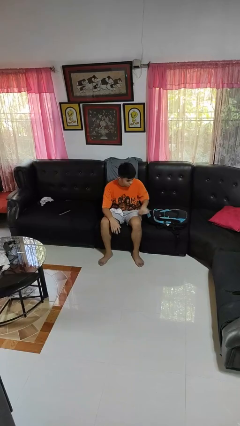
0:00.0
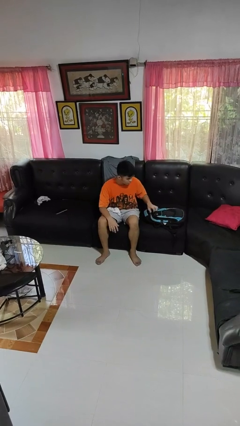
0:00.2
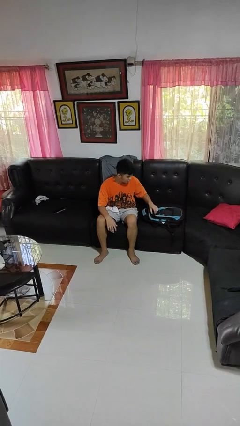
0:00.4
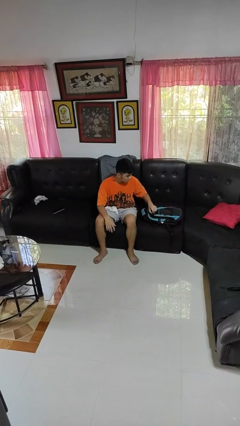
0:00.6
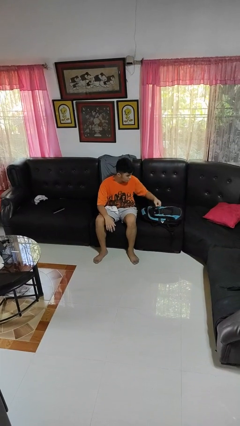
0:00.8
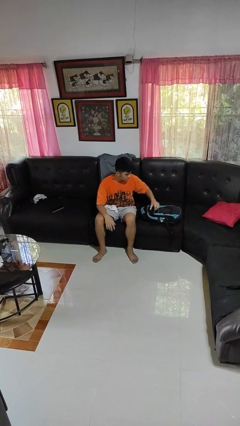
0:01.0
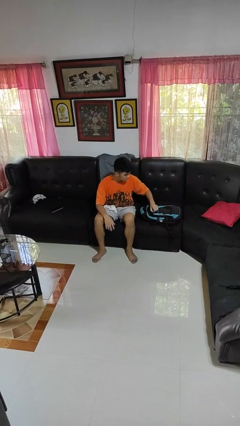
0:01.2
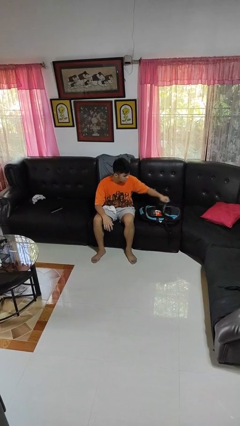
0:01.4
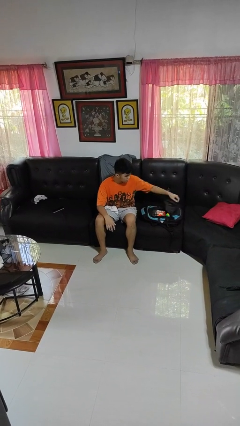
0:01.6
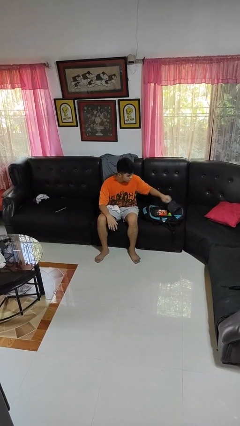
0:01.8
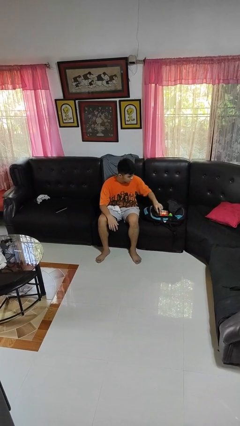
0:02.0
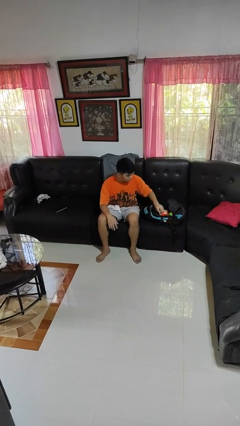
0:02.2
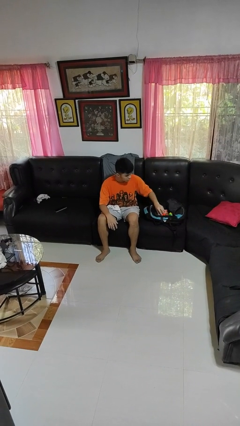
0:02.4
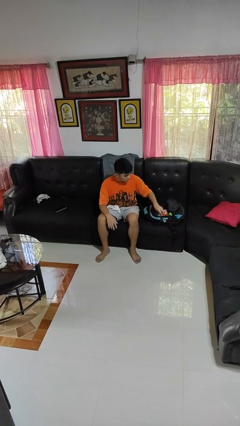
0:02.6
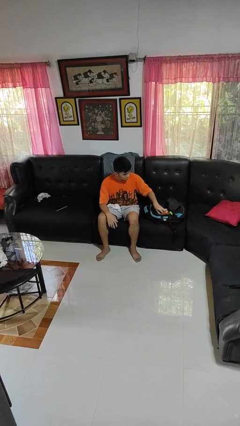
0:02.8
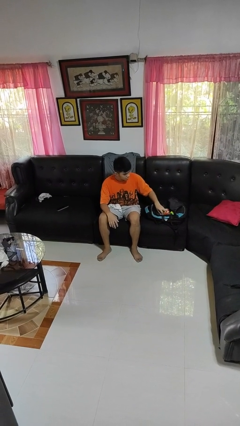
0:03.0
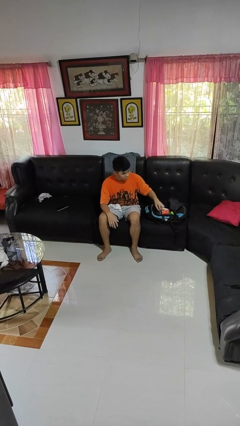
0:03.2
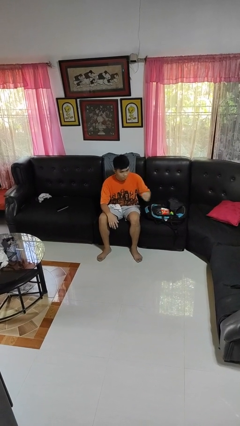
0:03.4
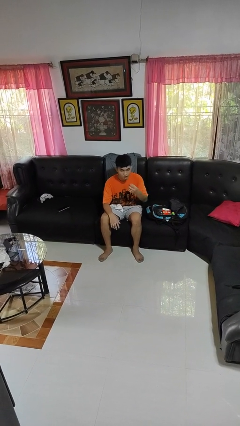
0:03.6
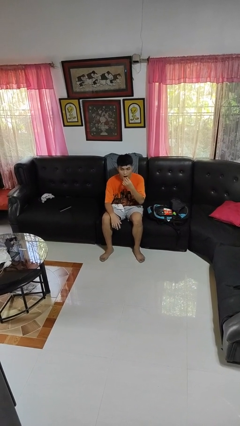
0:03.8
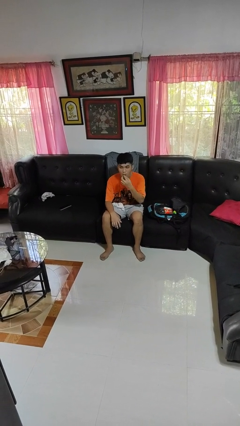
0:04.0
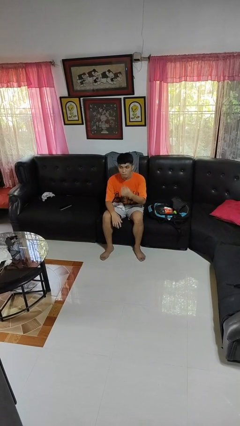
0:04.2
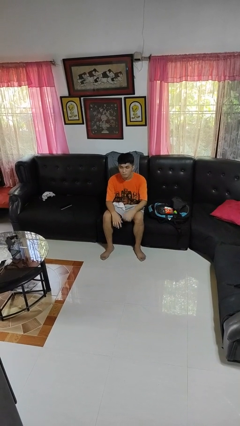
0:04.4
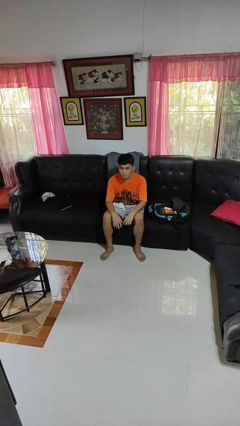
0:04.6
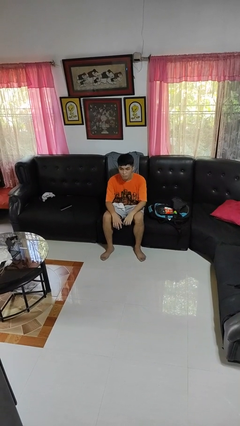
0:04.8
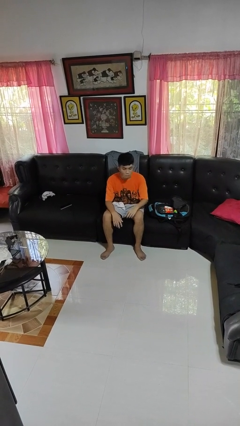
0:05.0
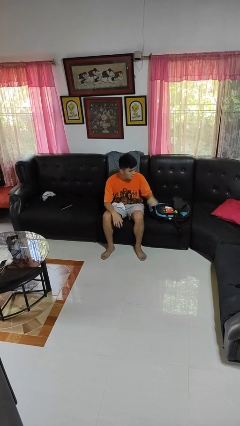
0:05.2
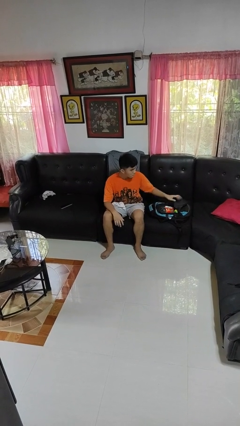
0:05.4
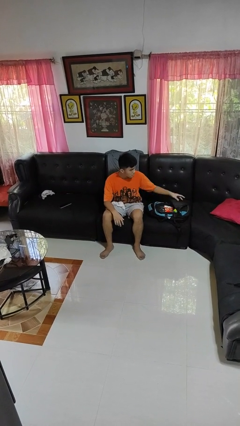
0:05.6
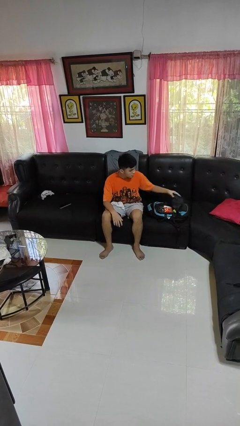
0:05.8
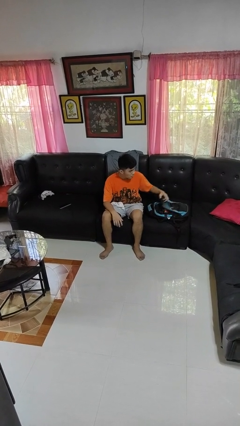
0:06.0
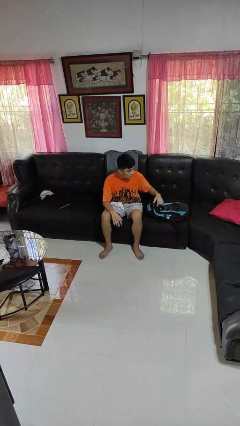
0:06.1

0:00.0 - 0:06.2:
person eats snack from bag

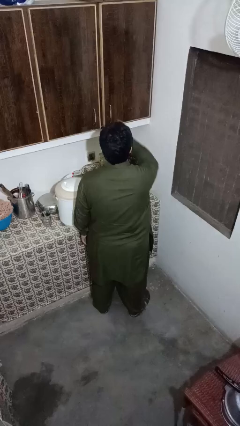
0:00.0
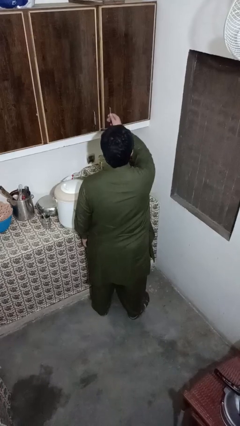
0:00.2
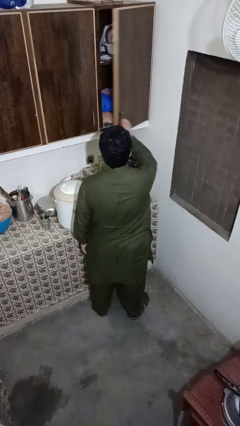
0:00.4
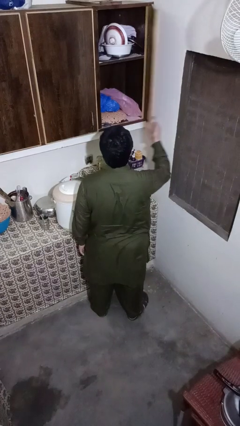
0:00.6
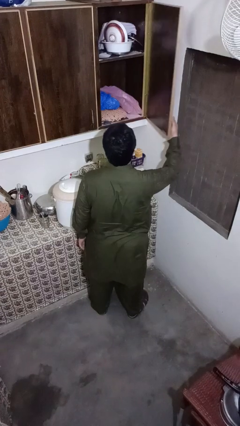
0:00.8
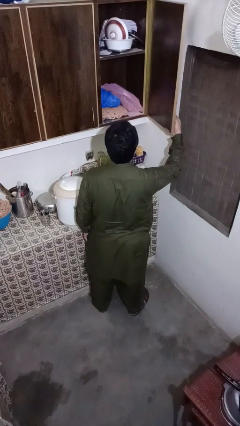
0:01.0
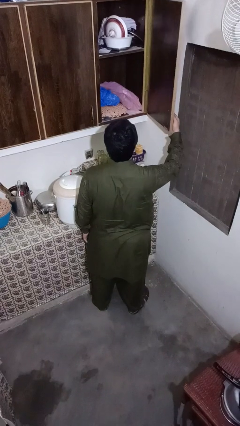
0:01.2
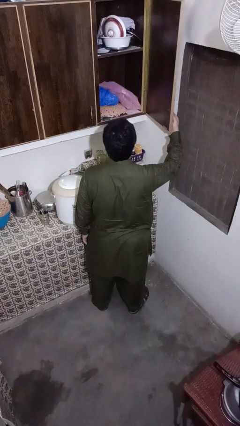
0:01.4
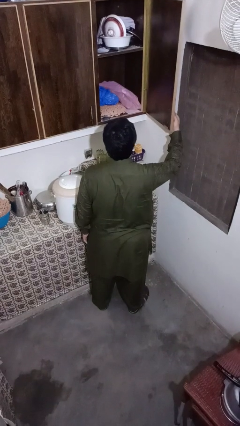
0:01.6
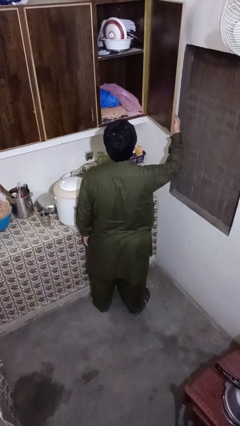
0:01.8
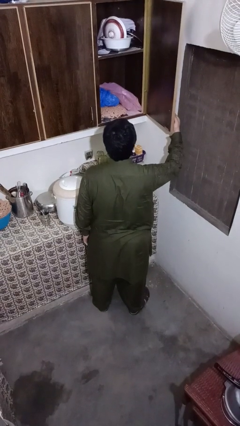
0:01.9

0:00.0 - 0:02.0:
person opens kitchen drawer

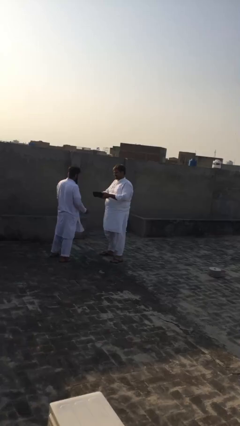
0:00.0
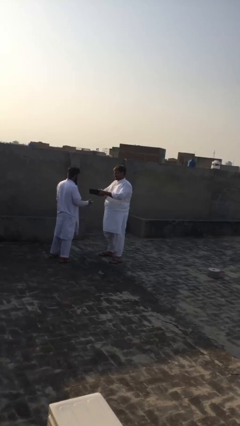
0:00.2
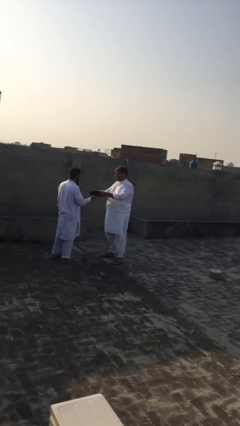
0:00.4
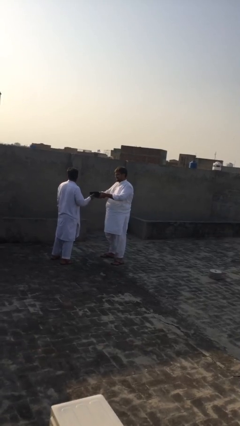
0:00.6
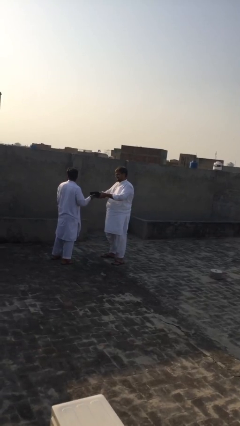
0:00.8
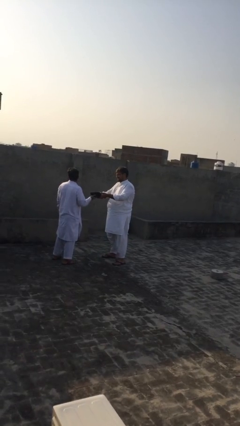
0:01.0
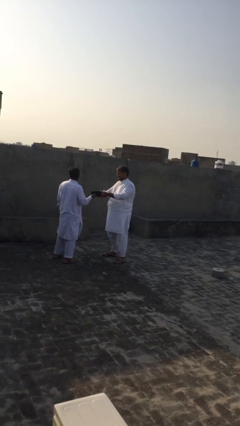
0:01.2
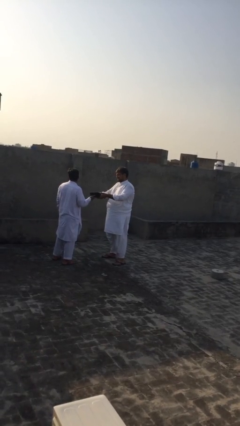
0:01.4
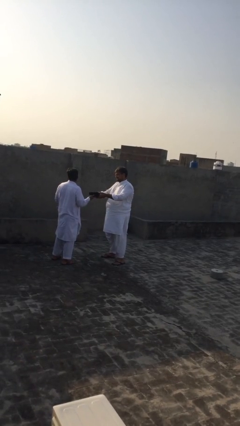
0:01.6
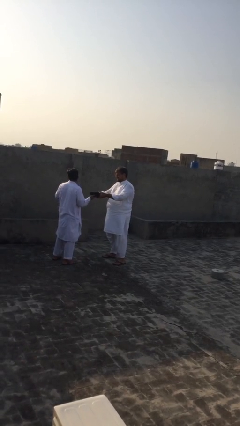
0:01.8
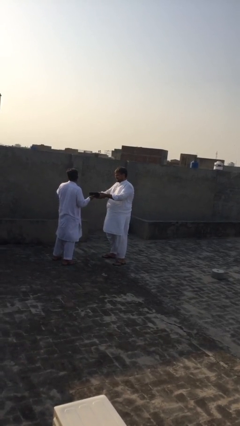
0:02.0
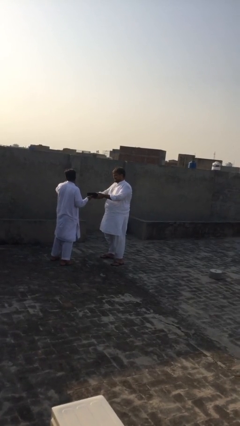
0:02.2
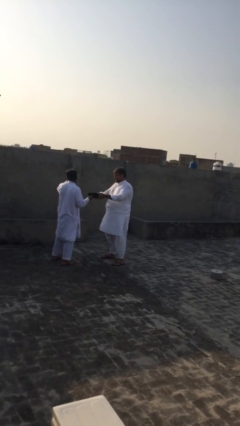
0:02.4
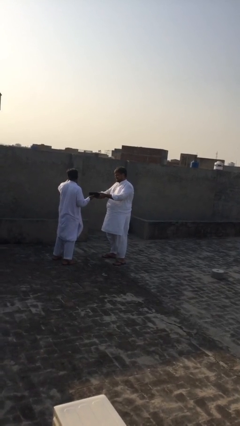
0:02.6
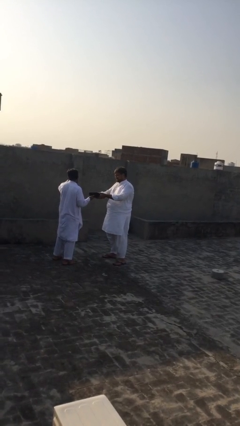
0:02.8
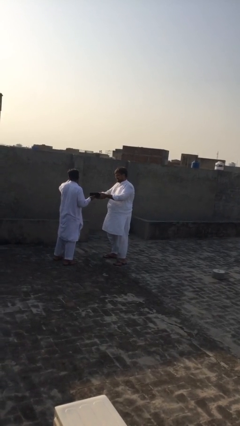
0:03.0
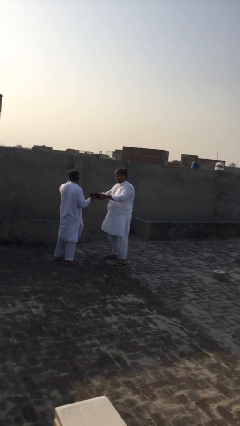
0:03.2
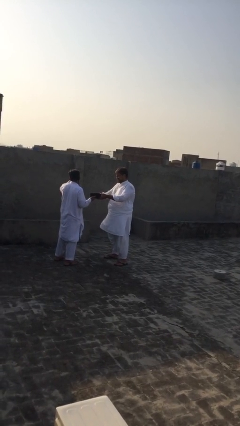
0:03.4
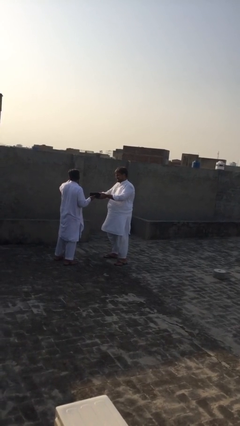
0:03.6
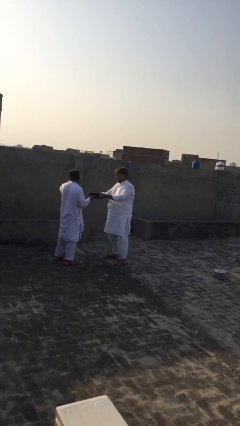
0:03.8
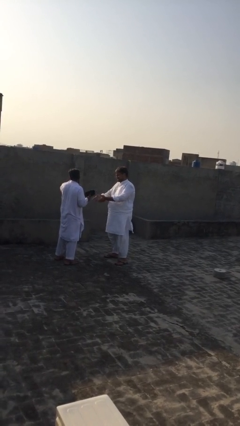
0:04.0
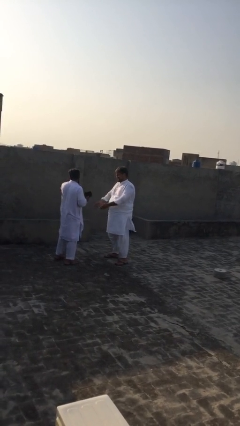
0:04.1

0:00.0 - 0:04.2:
person transfers object to person

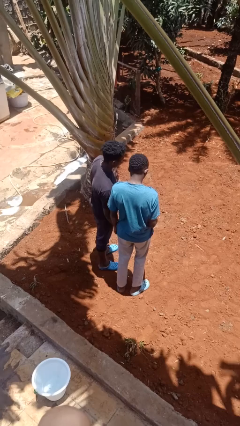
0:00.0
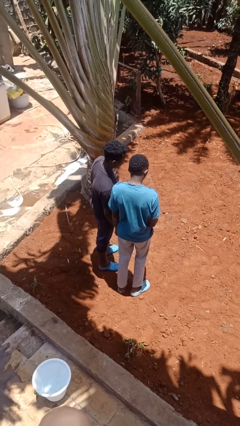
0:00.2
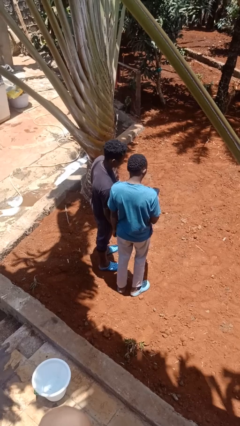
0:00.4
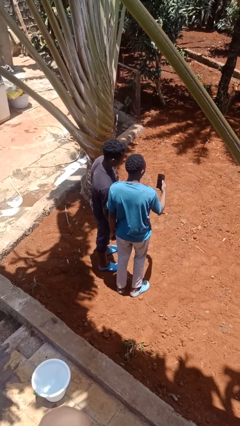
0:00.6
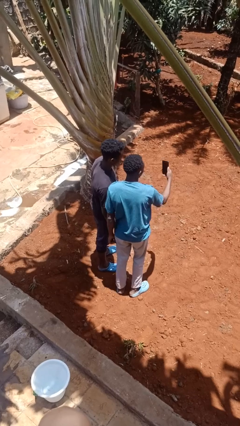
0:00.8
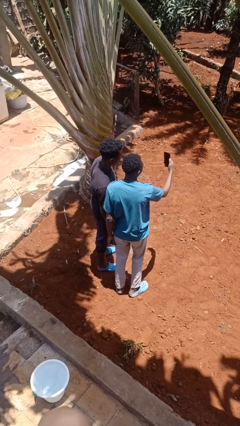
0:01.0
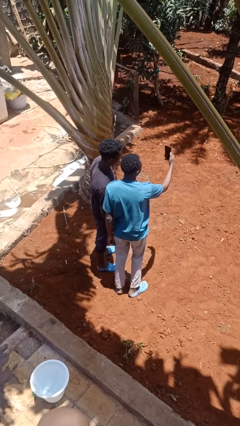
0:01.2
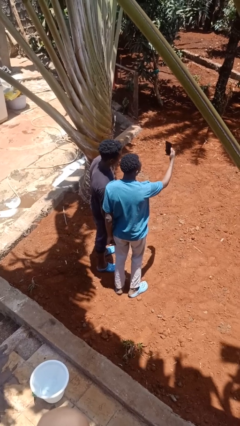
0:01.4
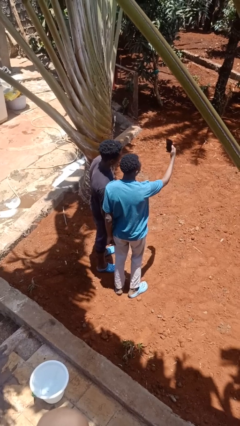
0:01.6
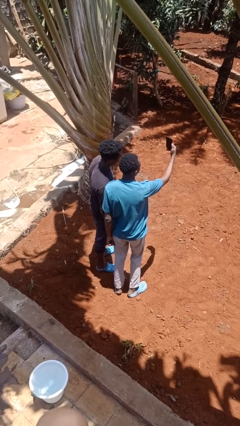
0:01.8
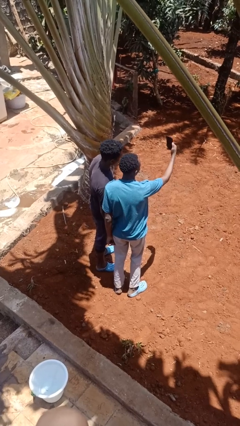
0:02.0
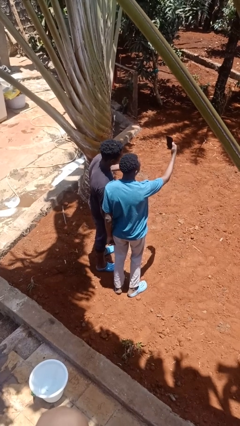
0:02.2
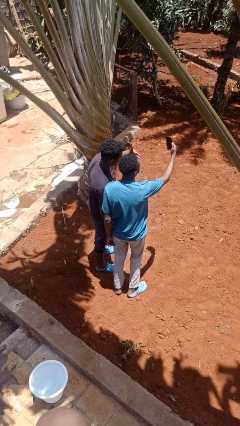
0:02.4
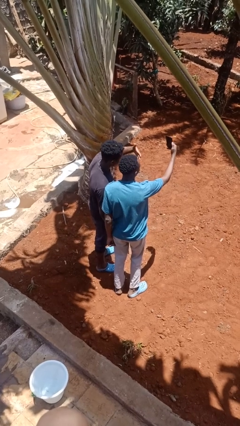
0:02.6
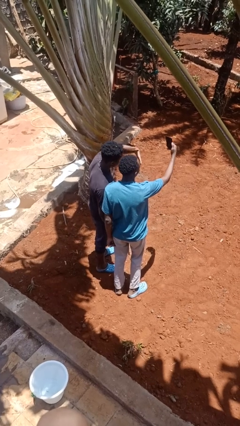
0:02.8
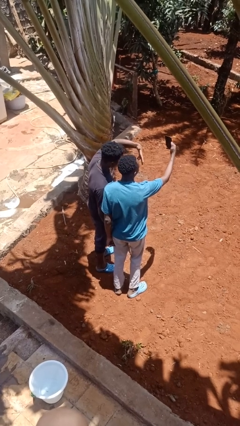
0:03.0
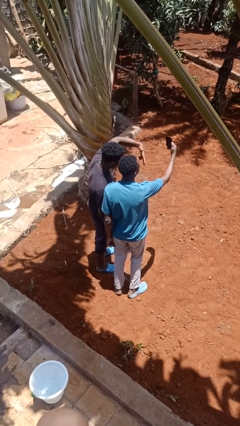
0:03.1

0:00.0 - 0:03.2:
person takes selfie with person

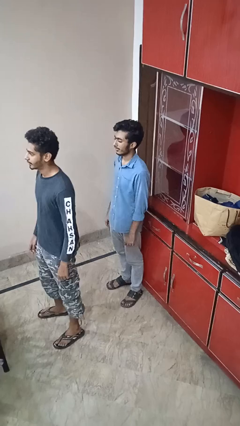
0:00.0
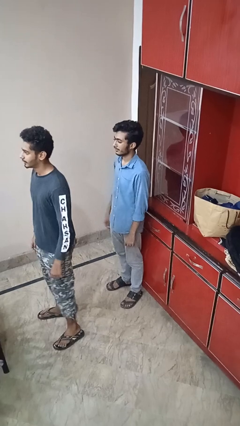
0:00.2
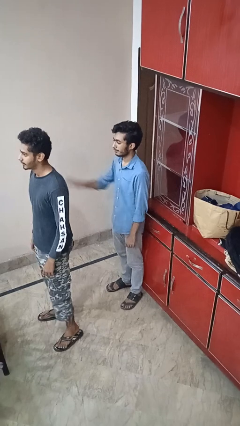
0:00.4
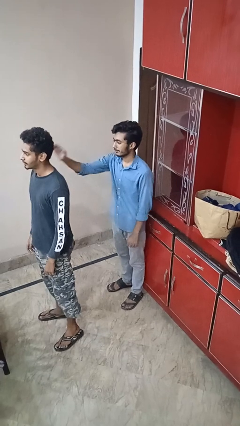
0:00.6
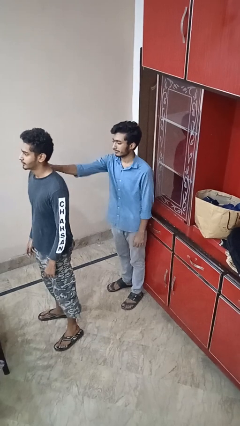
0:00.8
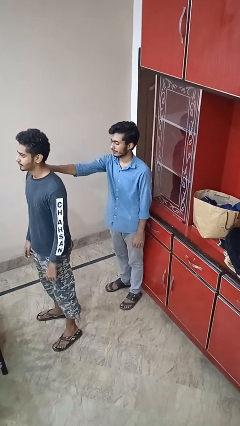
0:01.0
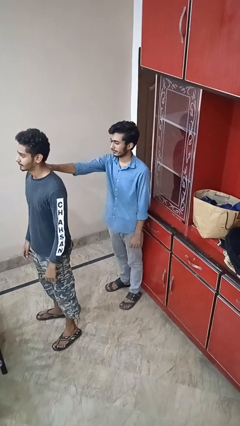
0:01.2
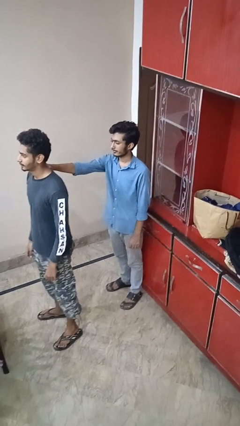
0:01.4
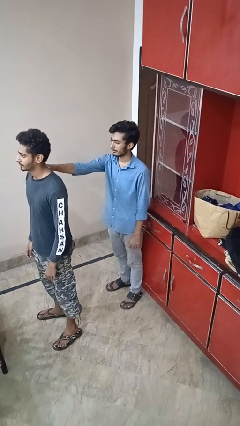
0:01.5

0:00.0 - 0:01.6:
person grabs person by shoulder

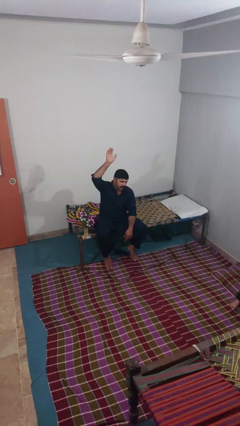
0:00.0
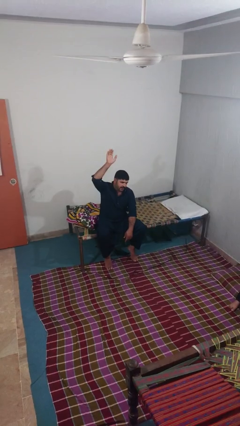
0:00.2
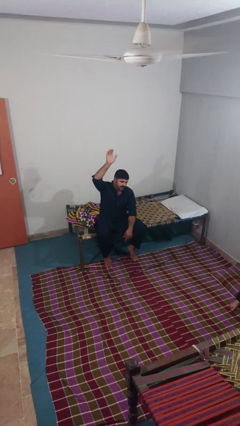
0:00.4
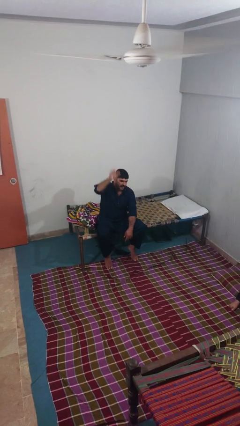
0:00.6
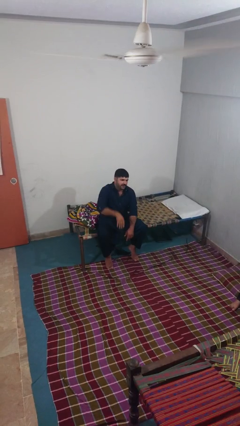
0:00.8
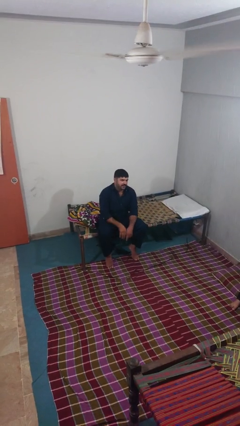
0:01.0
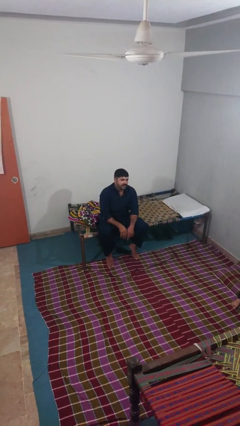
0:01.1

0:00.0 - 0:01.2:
person gestures lower hand
